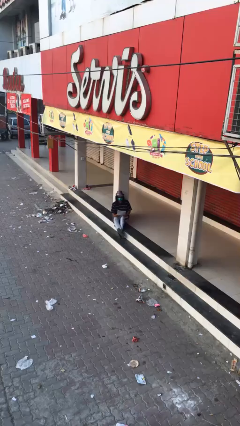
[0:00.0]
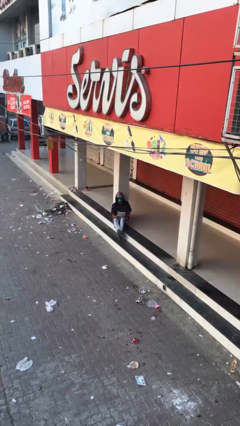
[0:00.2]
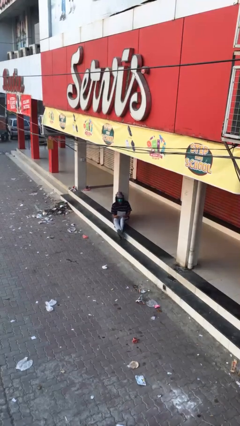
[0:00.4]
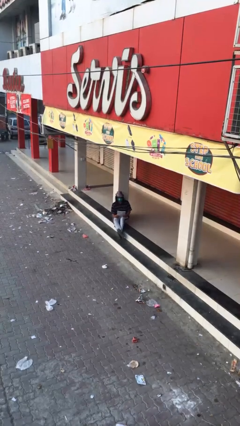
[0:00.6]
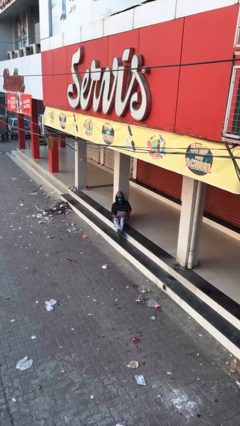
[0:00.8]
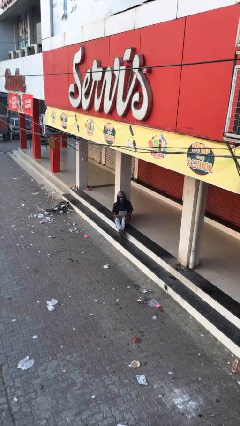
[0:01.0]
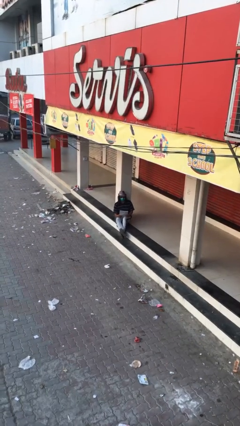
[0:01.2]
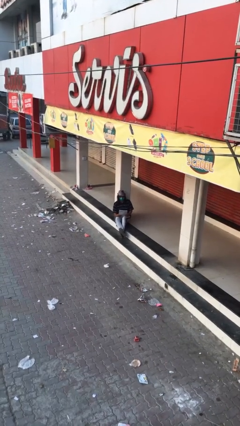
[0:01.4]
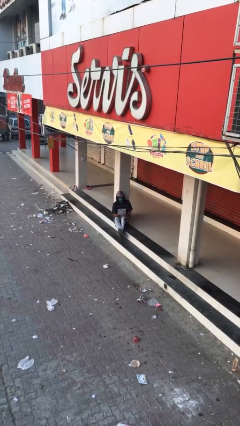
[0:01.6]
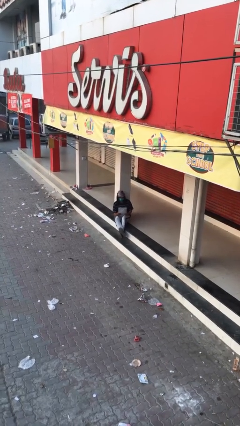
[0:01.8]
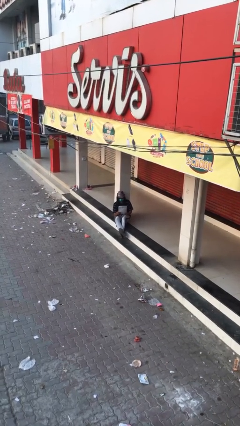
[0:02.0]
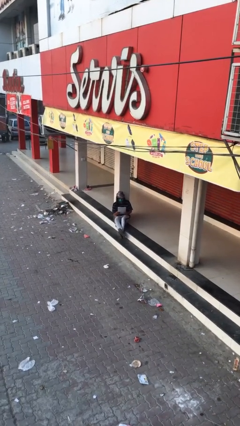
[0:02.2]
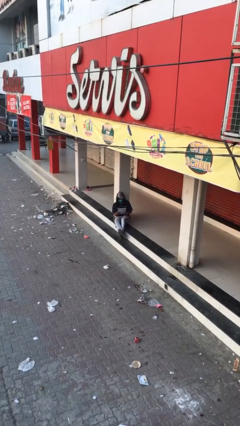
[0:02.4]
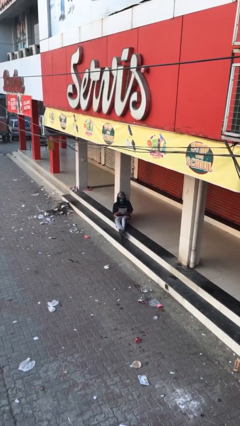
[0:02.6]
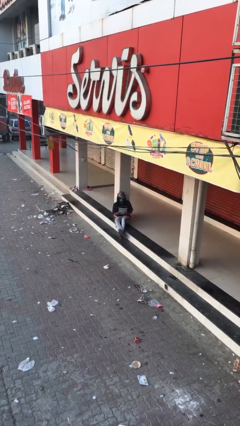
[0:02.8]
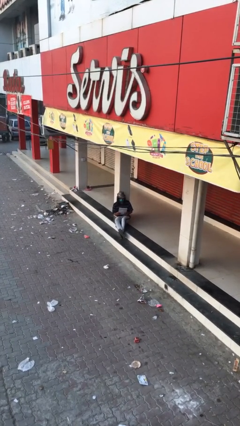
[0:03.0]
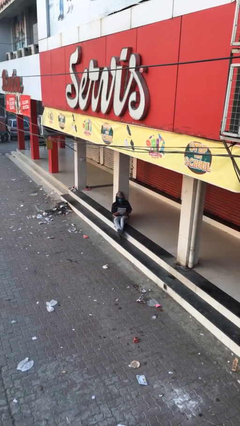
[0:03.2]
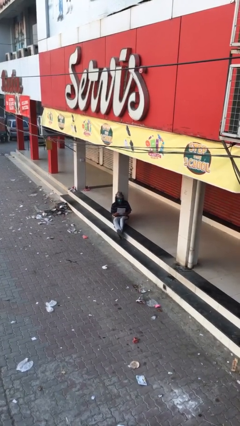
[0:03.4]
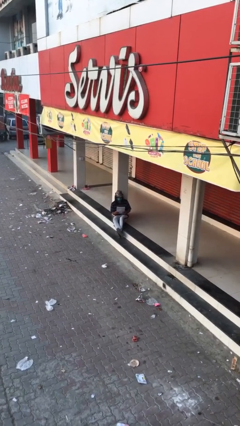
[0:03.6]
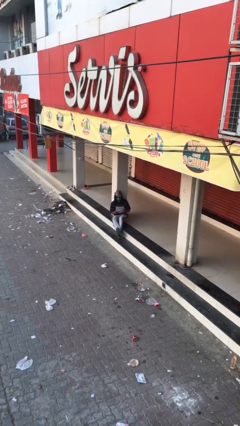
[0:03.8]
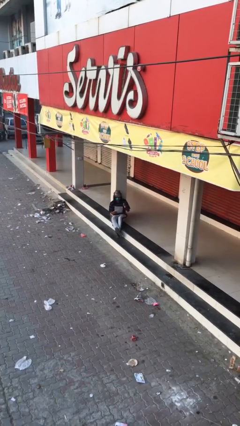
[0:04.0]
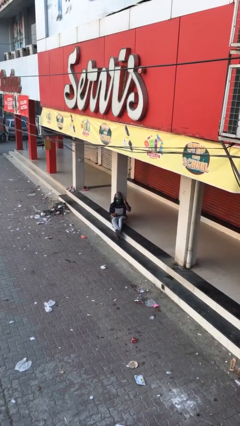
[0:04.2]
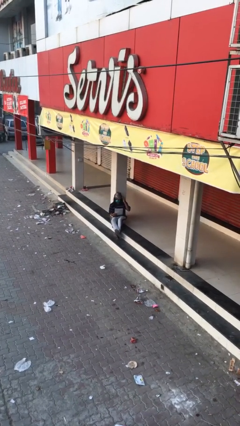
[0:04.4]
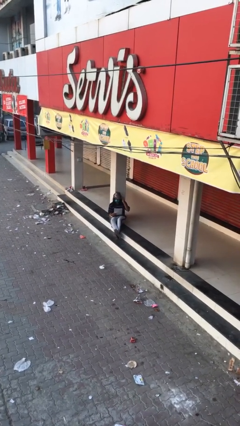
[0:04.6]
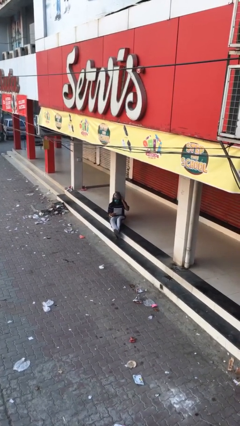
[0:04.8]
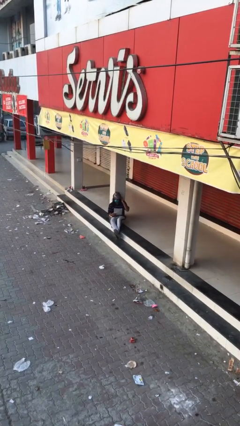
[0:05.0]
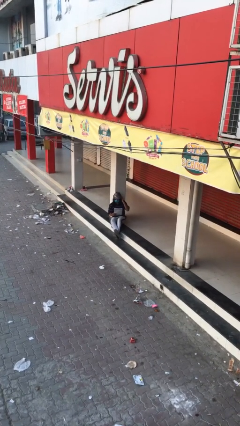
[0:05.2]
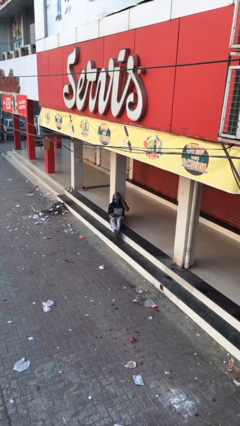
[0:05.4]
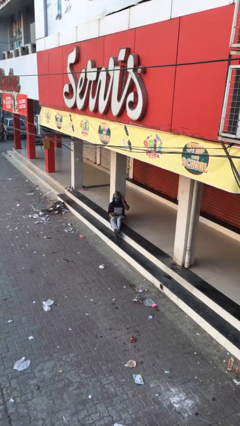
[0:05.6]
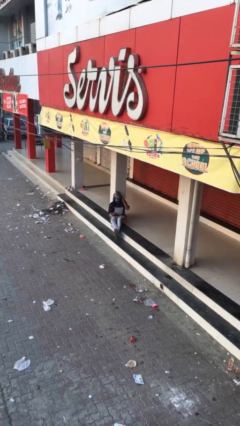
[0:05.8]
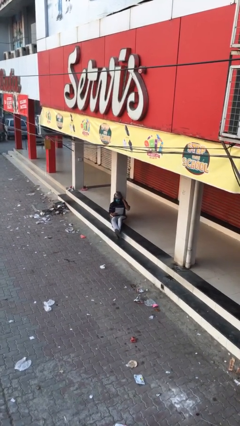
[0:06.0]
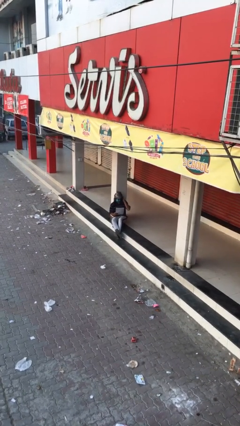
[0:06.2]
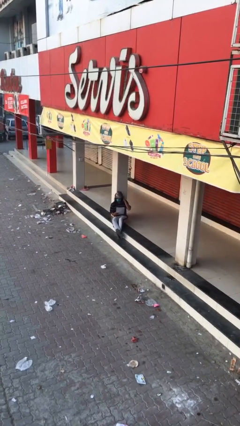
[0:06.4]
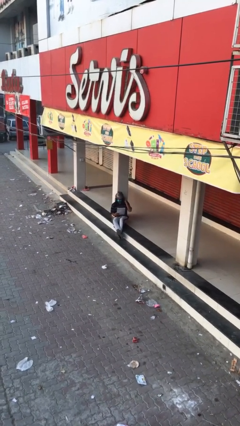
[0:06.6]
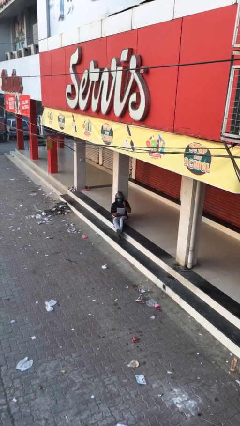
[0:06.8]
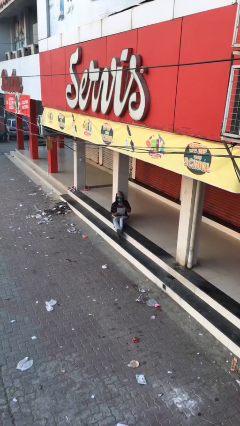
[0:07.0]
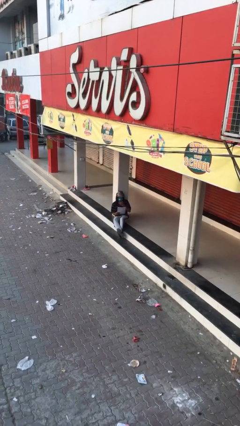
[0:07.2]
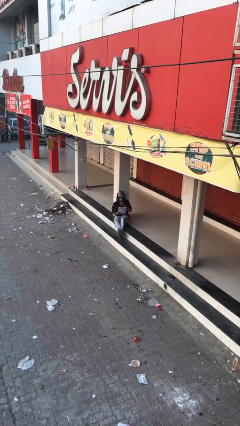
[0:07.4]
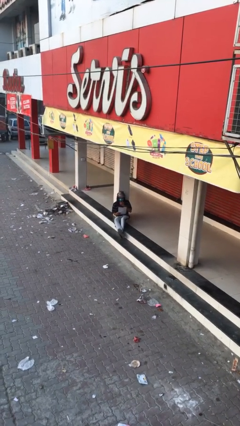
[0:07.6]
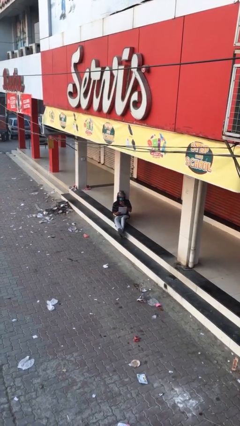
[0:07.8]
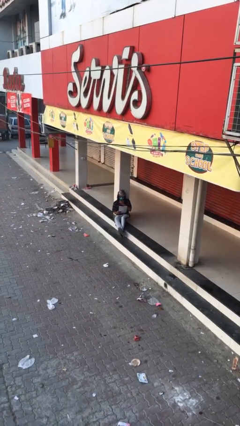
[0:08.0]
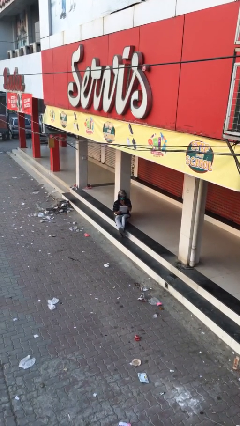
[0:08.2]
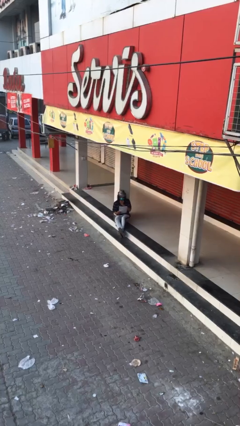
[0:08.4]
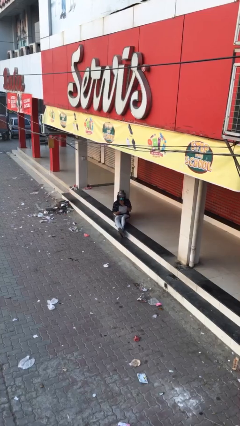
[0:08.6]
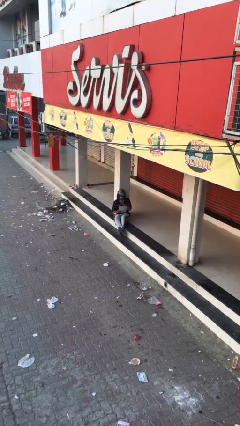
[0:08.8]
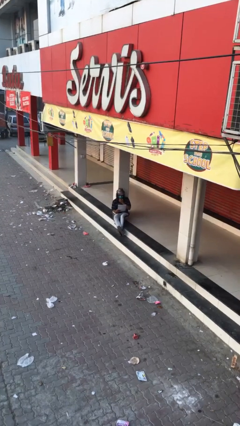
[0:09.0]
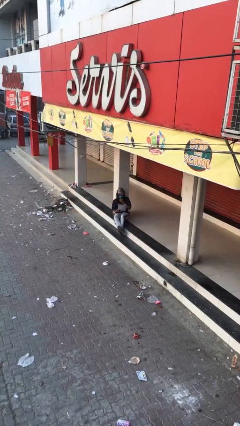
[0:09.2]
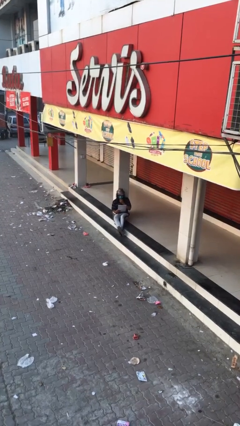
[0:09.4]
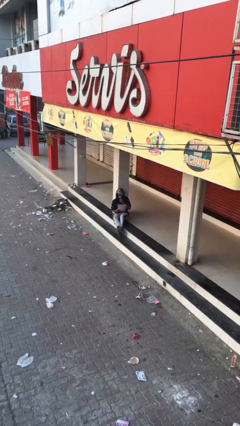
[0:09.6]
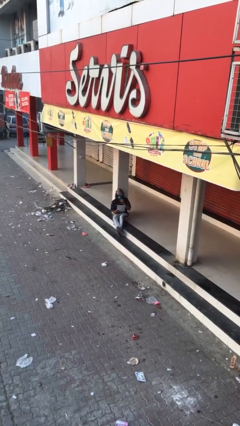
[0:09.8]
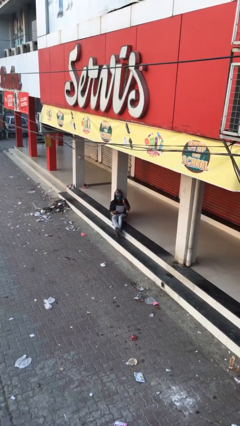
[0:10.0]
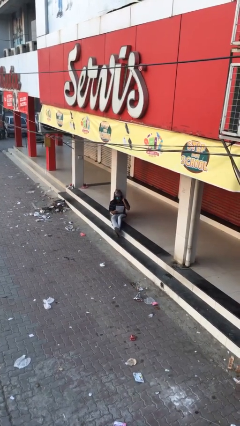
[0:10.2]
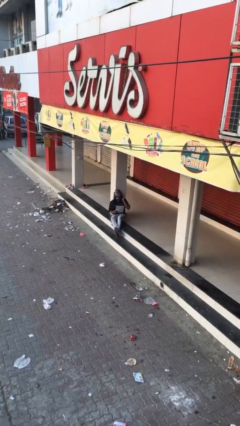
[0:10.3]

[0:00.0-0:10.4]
person reads document

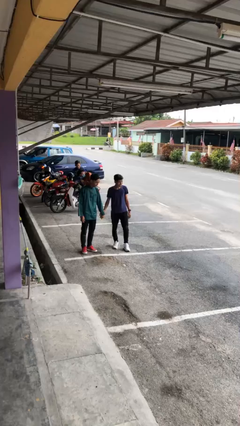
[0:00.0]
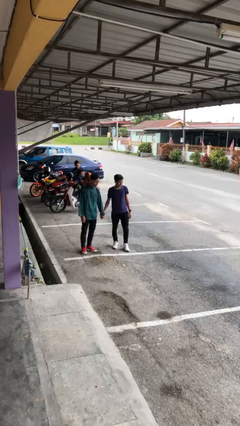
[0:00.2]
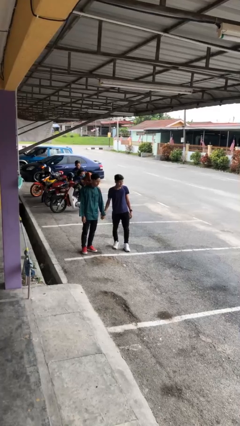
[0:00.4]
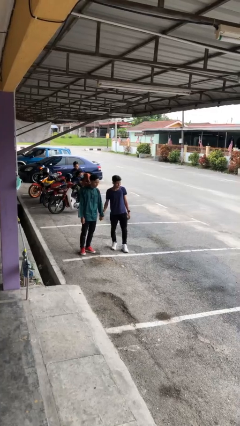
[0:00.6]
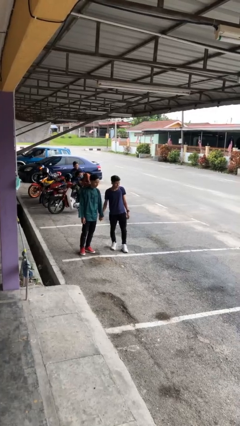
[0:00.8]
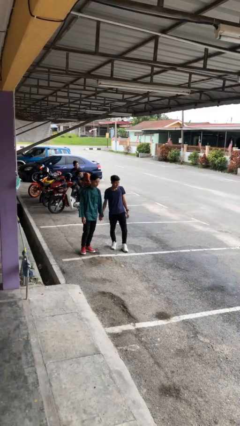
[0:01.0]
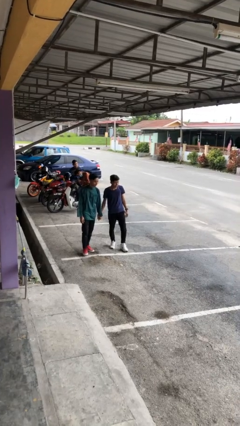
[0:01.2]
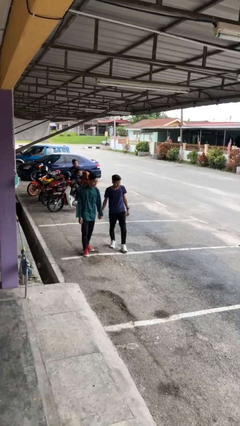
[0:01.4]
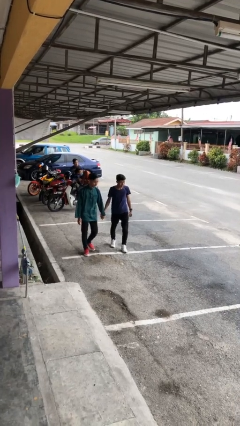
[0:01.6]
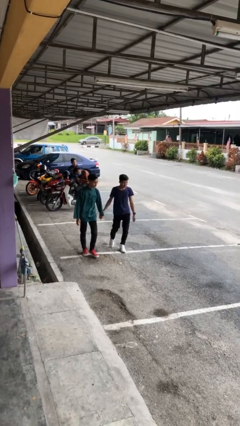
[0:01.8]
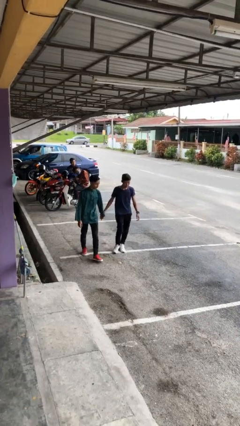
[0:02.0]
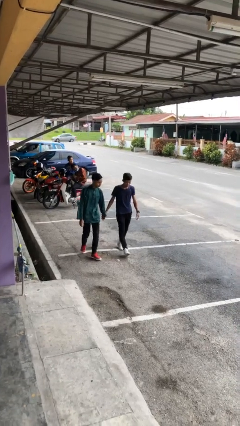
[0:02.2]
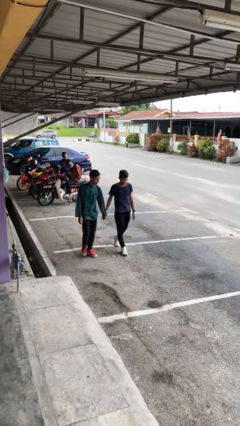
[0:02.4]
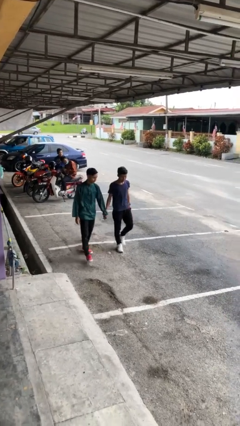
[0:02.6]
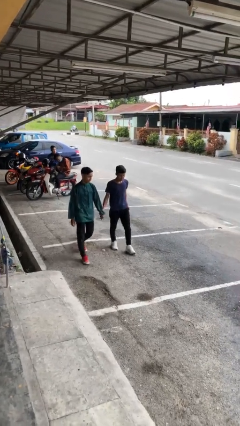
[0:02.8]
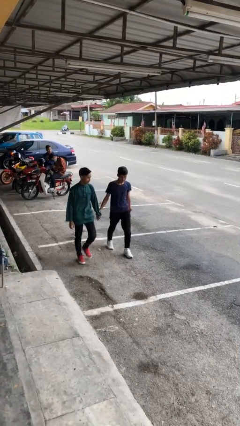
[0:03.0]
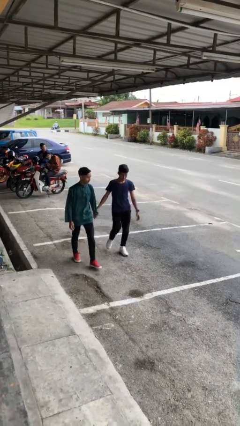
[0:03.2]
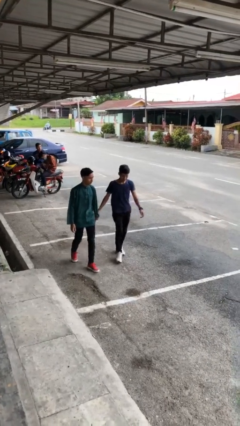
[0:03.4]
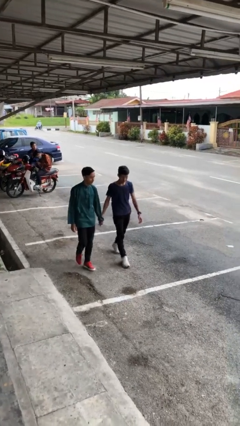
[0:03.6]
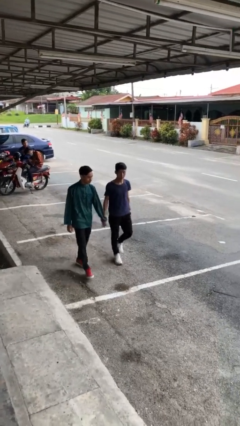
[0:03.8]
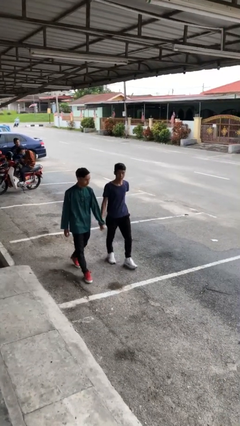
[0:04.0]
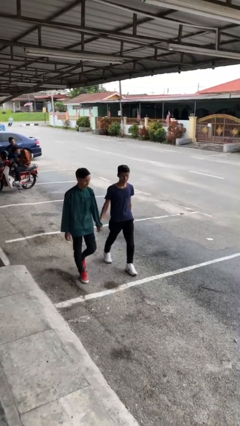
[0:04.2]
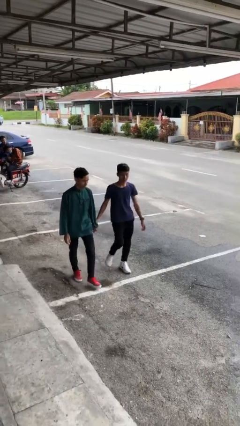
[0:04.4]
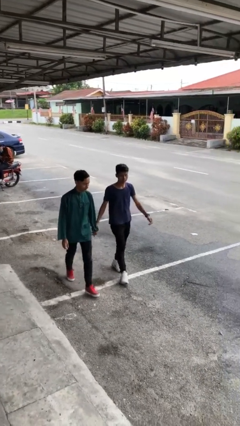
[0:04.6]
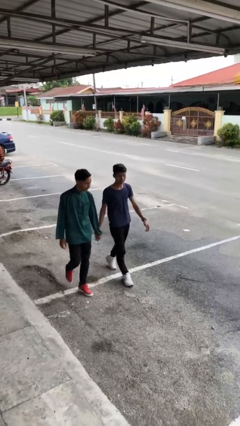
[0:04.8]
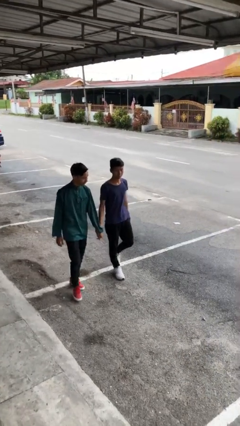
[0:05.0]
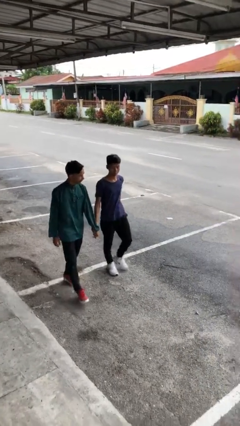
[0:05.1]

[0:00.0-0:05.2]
person holds hand

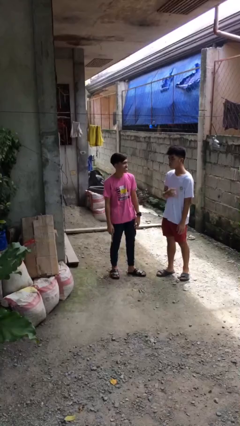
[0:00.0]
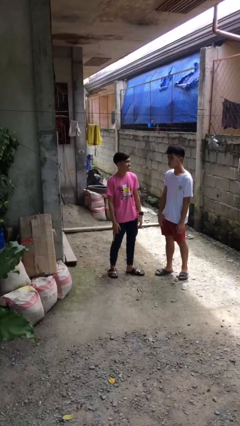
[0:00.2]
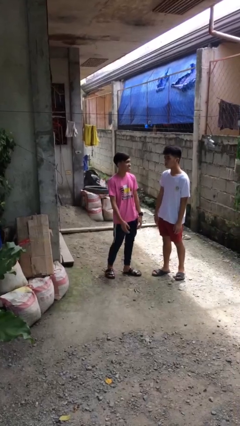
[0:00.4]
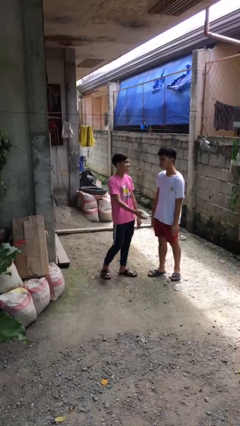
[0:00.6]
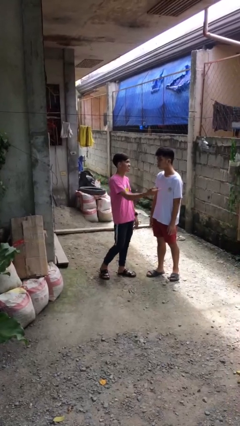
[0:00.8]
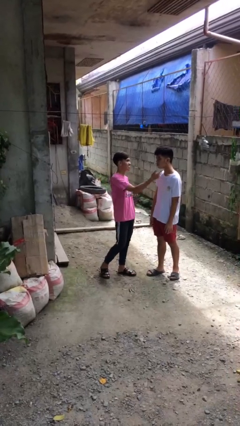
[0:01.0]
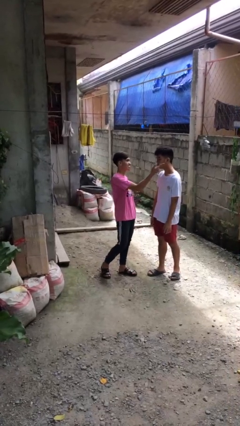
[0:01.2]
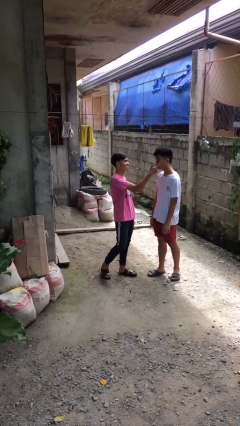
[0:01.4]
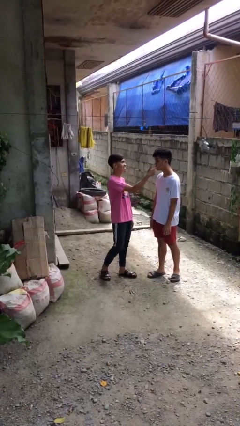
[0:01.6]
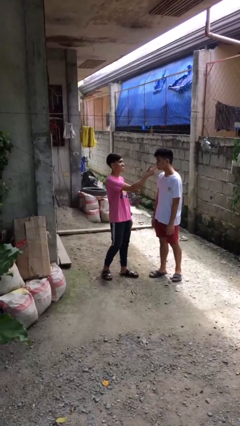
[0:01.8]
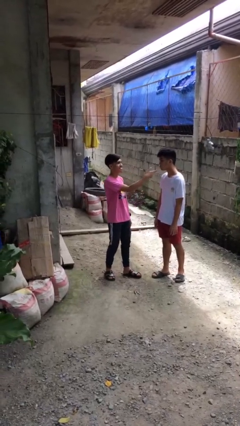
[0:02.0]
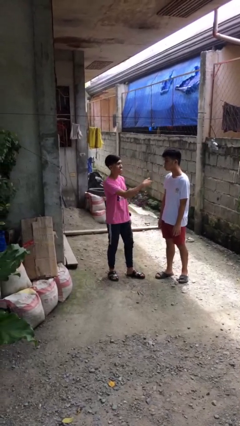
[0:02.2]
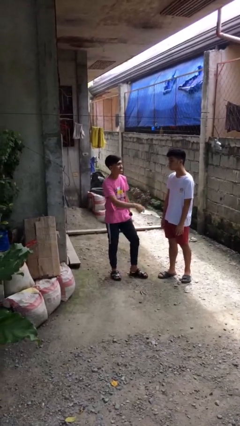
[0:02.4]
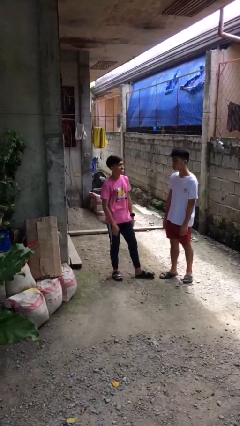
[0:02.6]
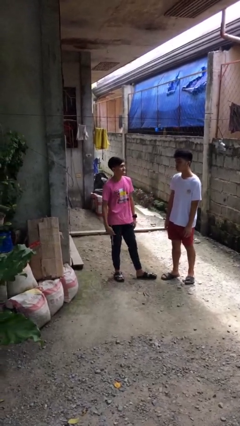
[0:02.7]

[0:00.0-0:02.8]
person touches face of person
